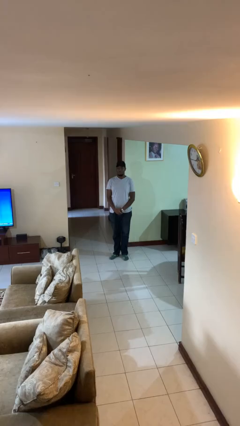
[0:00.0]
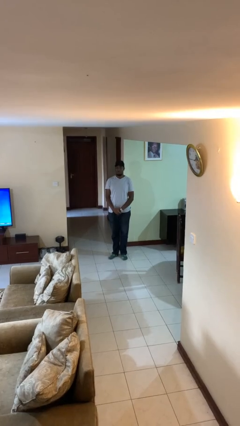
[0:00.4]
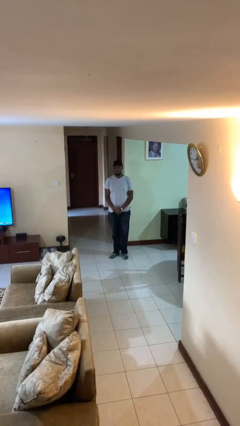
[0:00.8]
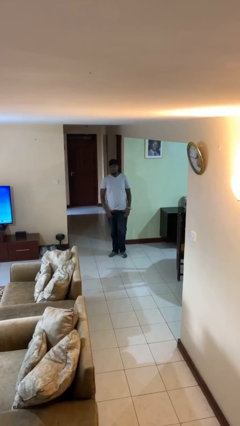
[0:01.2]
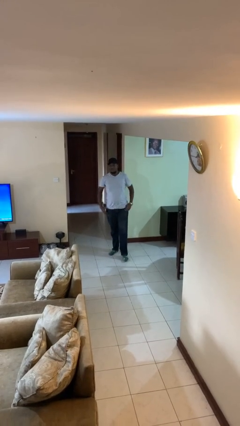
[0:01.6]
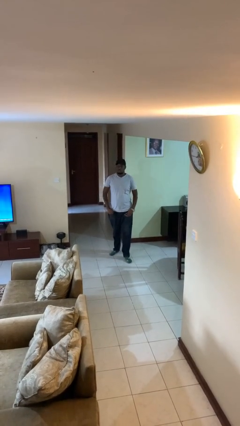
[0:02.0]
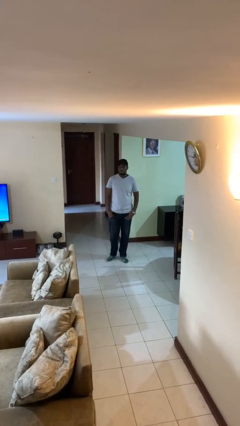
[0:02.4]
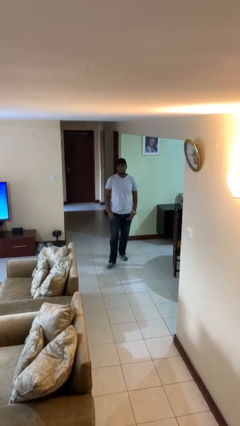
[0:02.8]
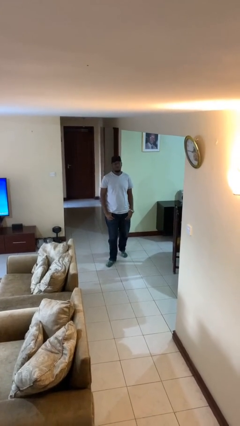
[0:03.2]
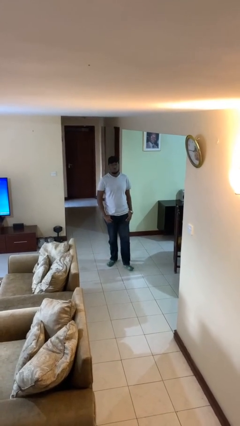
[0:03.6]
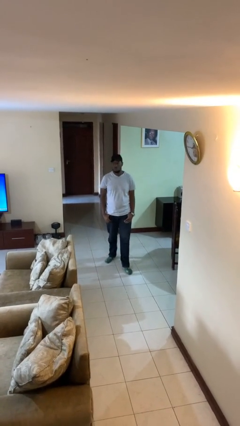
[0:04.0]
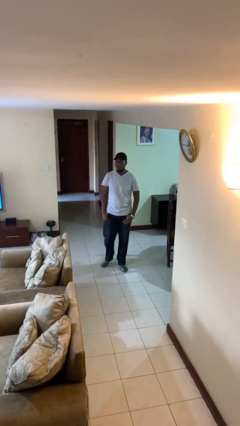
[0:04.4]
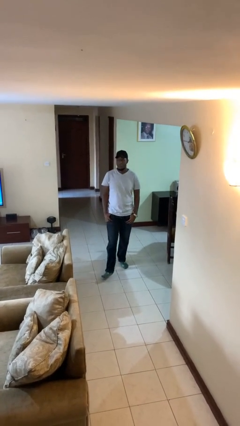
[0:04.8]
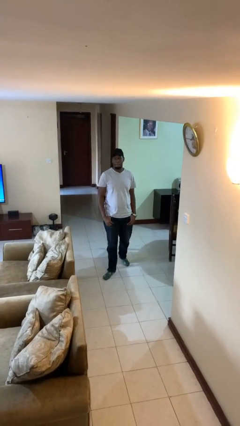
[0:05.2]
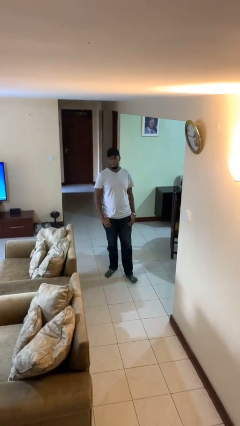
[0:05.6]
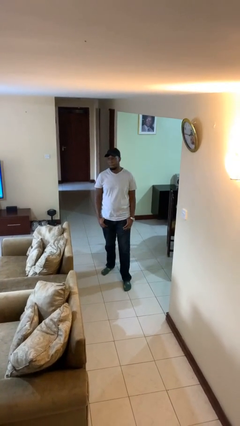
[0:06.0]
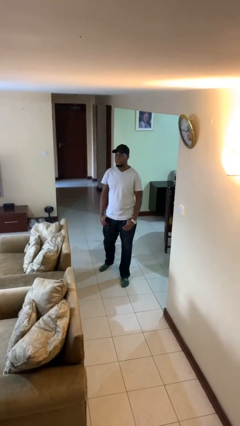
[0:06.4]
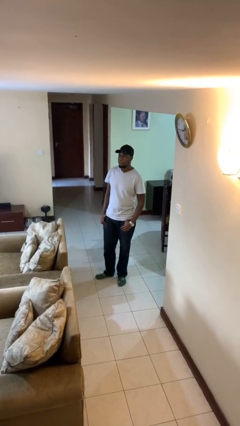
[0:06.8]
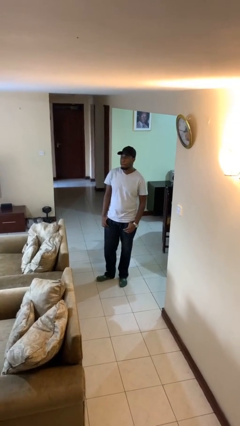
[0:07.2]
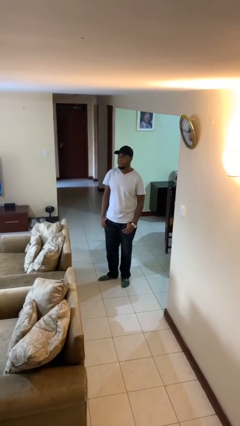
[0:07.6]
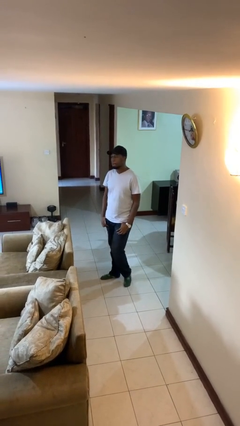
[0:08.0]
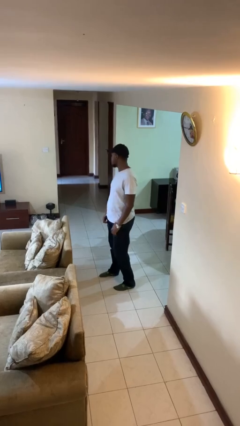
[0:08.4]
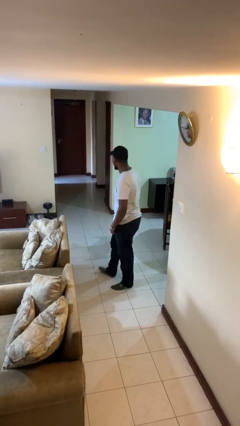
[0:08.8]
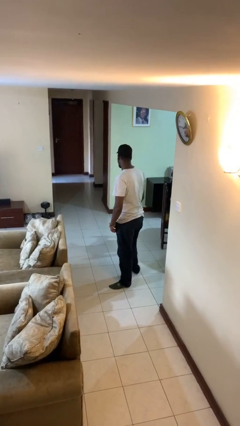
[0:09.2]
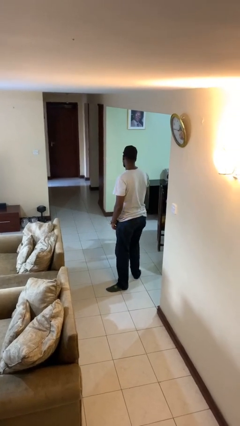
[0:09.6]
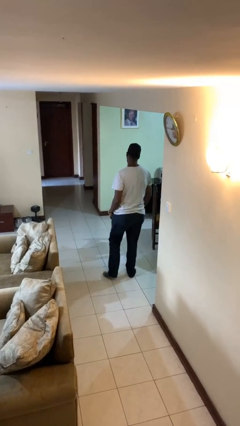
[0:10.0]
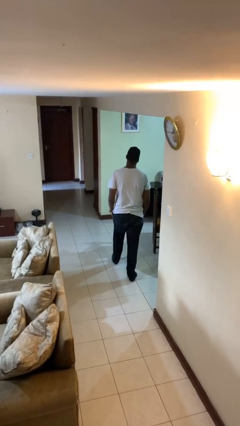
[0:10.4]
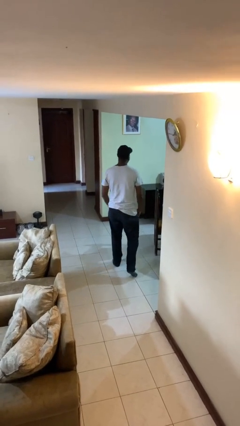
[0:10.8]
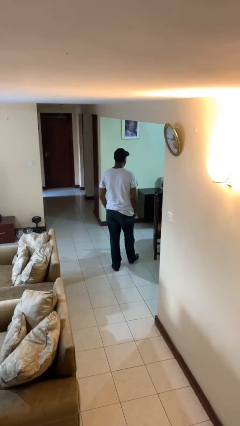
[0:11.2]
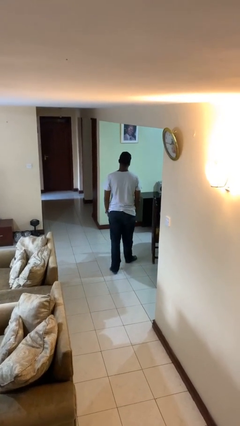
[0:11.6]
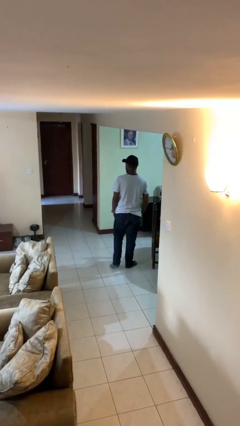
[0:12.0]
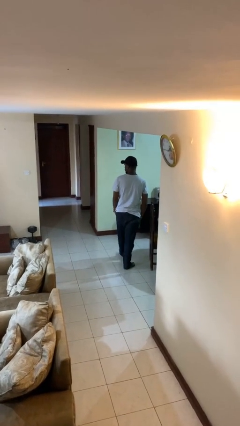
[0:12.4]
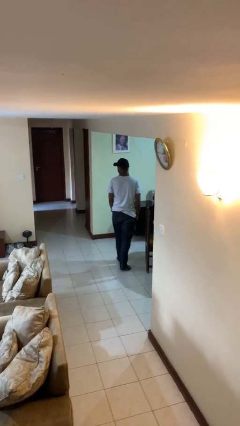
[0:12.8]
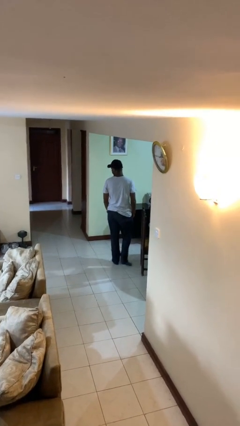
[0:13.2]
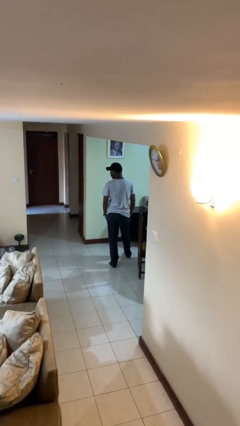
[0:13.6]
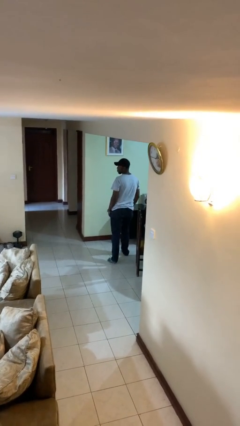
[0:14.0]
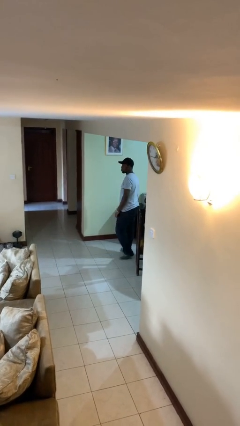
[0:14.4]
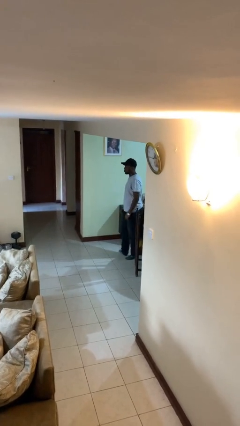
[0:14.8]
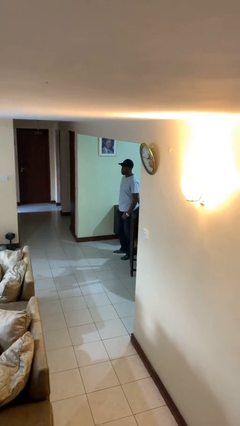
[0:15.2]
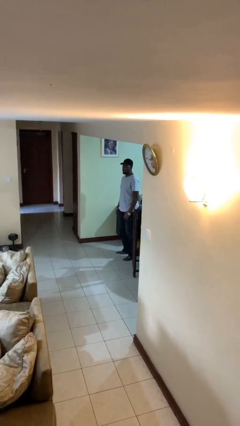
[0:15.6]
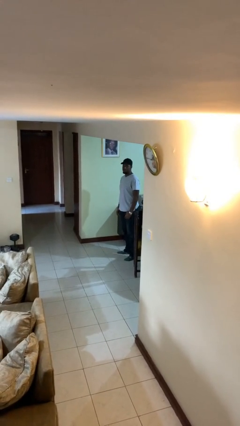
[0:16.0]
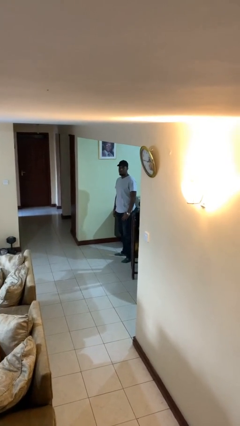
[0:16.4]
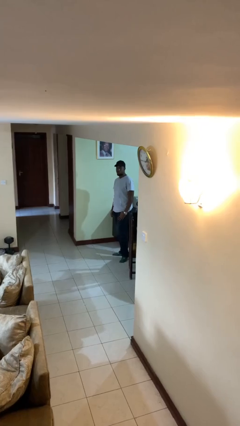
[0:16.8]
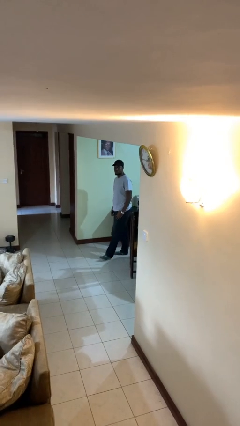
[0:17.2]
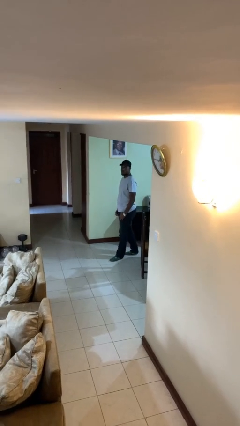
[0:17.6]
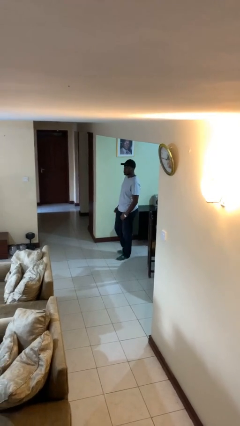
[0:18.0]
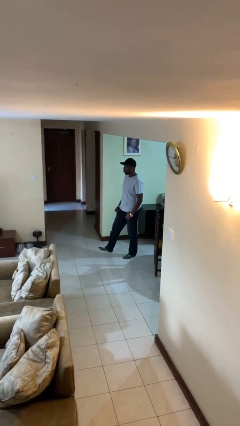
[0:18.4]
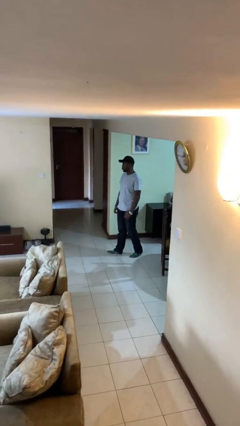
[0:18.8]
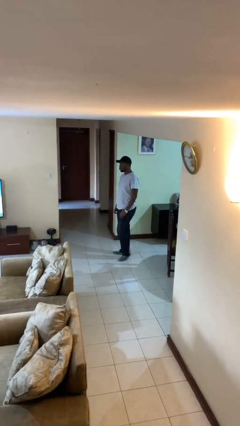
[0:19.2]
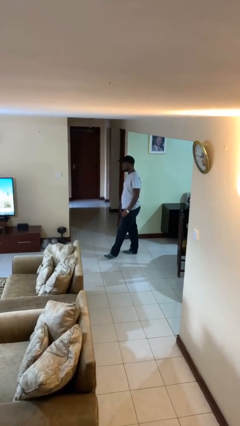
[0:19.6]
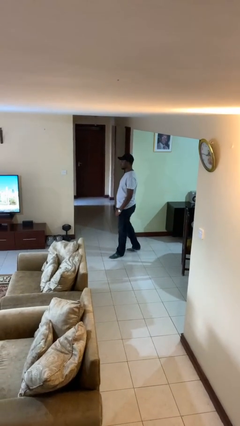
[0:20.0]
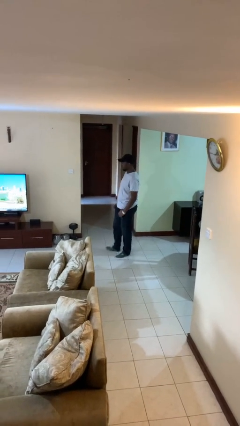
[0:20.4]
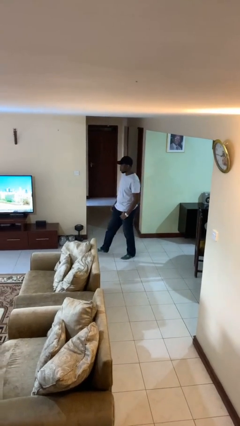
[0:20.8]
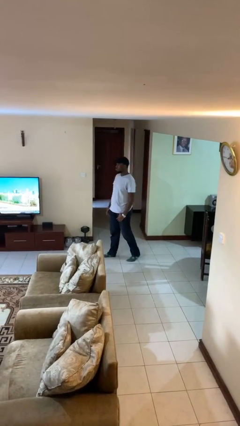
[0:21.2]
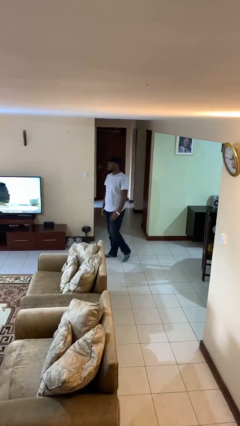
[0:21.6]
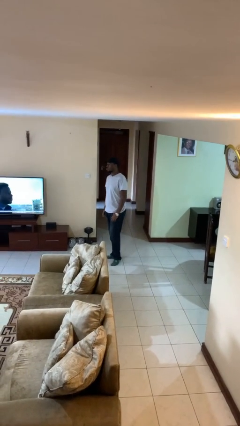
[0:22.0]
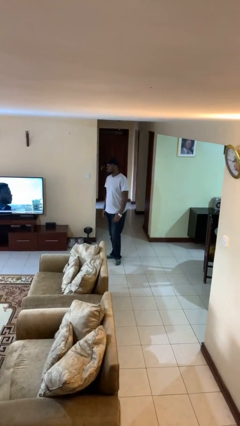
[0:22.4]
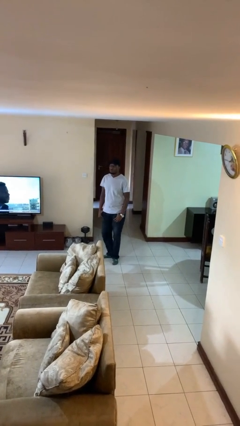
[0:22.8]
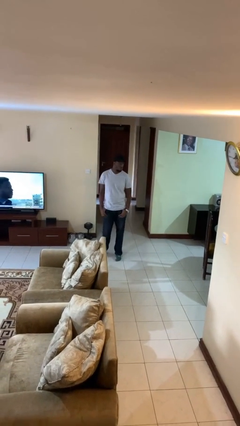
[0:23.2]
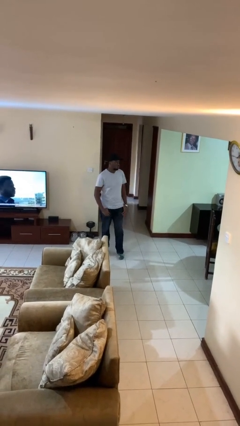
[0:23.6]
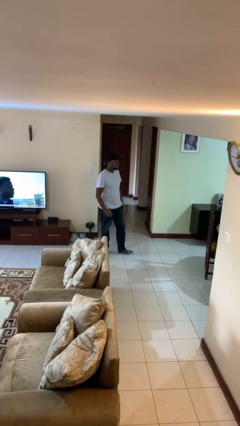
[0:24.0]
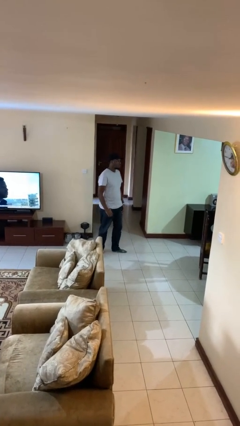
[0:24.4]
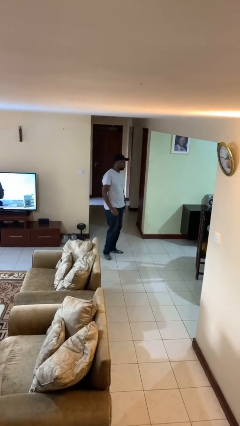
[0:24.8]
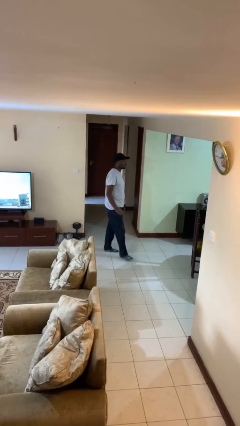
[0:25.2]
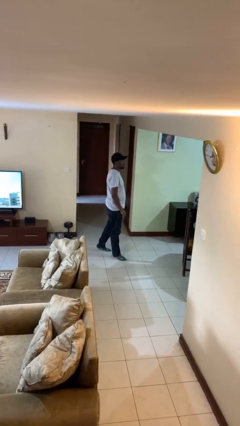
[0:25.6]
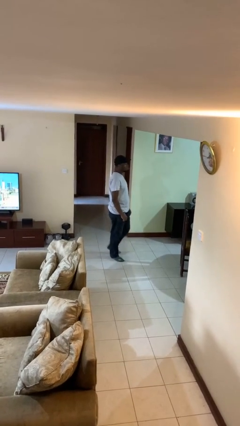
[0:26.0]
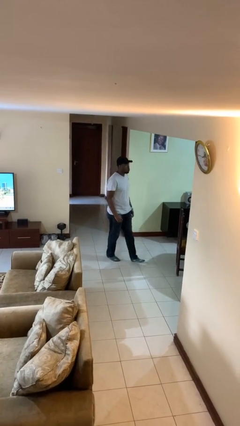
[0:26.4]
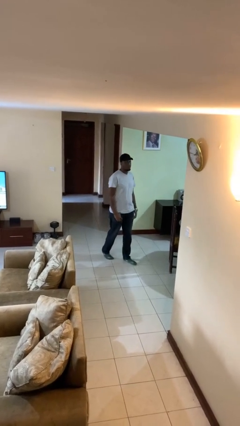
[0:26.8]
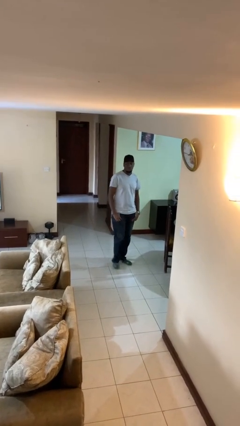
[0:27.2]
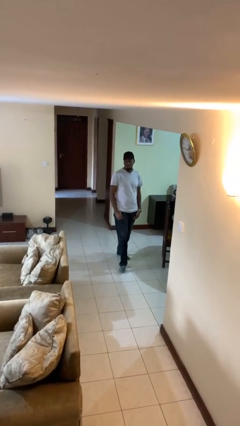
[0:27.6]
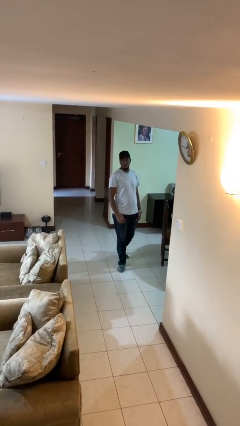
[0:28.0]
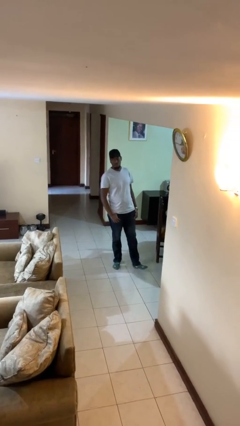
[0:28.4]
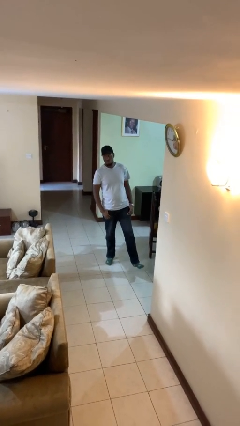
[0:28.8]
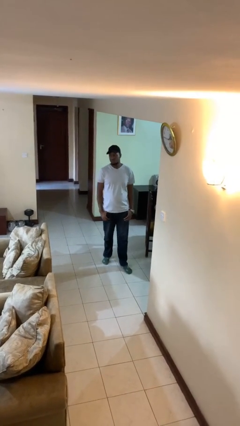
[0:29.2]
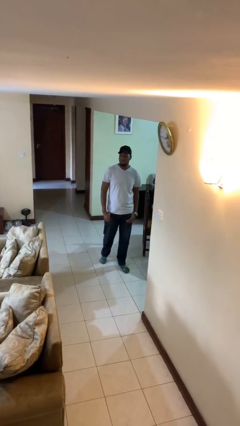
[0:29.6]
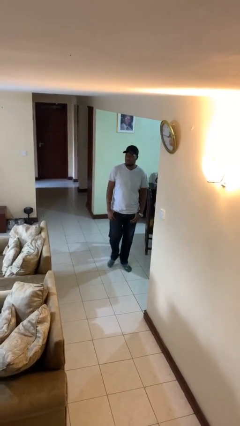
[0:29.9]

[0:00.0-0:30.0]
person walks

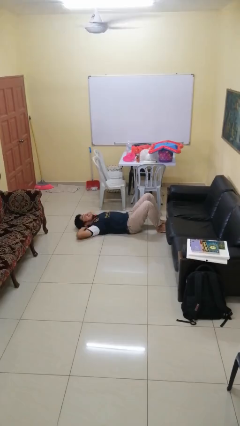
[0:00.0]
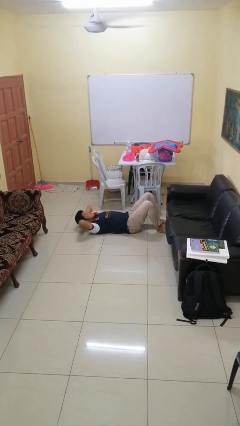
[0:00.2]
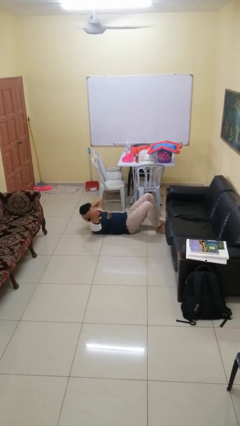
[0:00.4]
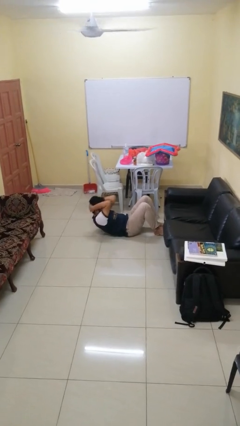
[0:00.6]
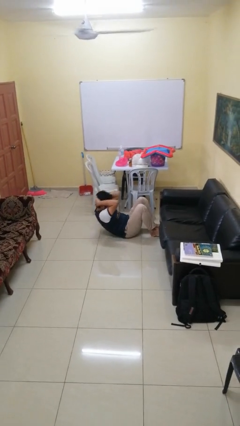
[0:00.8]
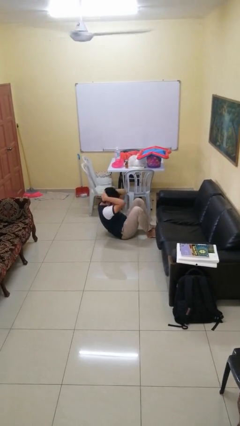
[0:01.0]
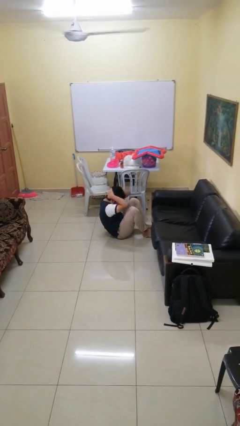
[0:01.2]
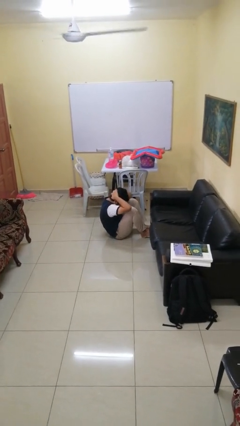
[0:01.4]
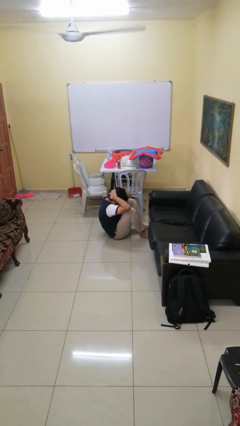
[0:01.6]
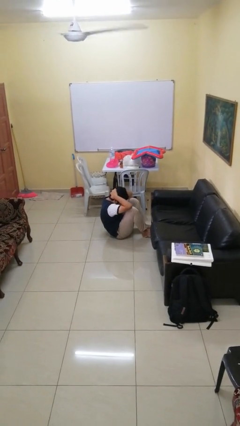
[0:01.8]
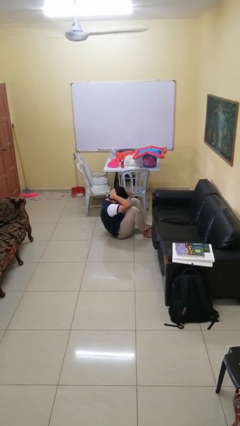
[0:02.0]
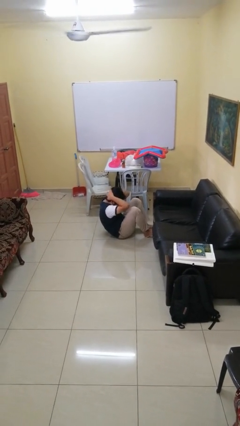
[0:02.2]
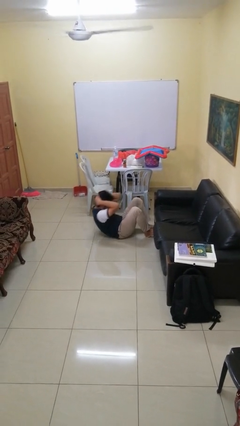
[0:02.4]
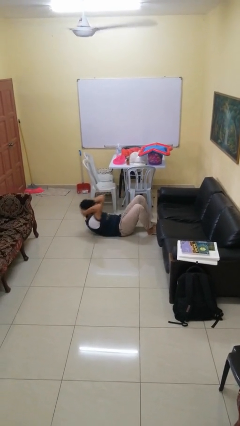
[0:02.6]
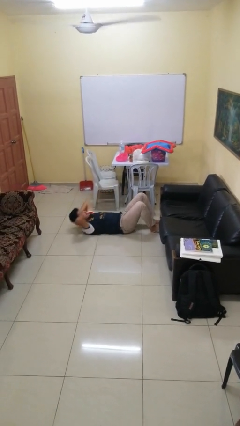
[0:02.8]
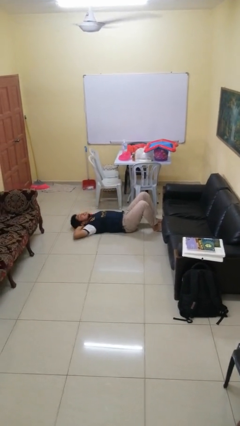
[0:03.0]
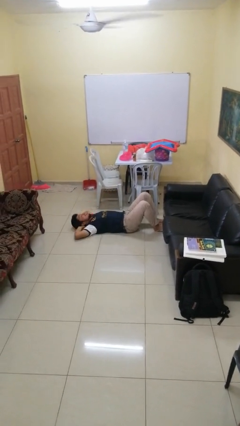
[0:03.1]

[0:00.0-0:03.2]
person exercises with situp
